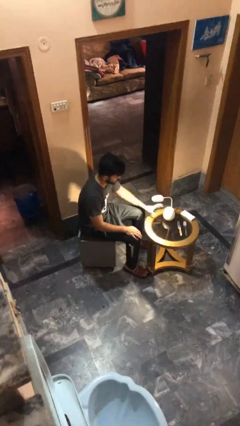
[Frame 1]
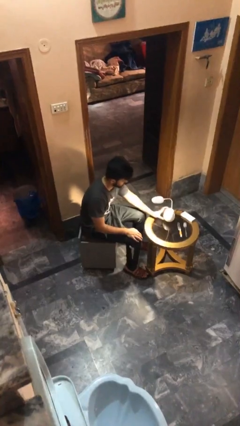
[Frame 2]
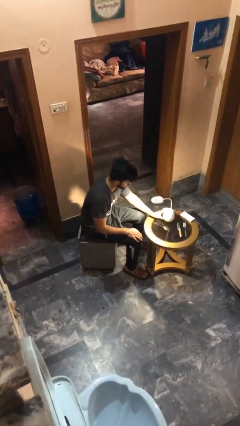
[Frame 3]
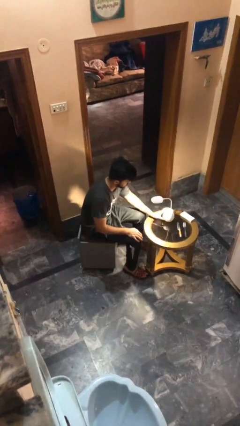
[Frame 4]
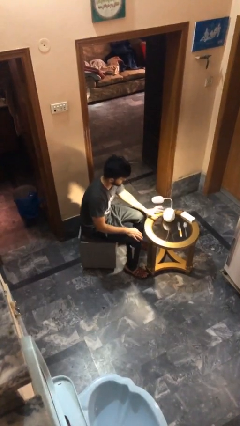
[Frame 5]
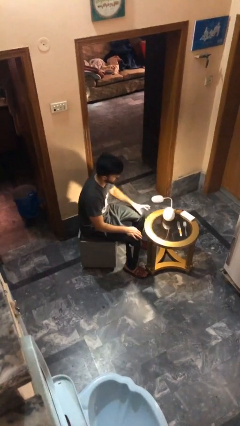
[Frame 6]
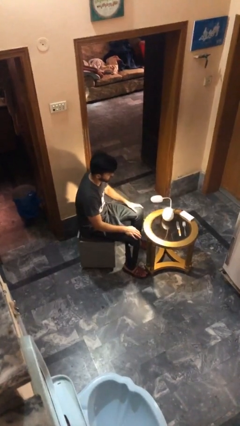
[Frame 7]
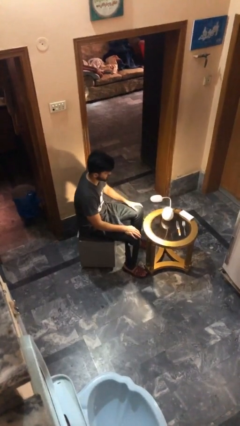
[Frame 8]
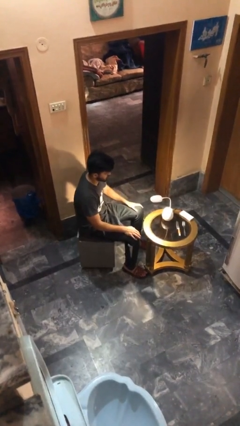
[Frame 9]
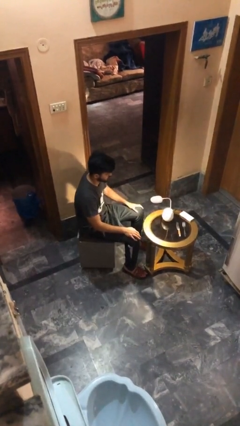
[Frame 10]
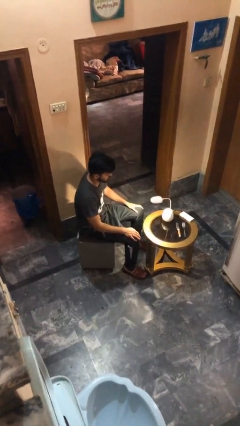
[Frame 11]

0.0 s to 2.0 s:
person turns off lamp

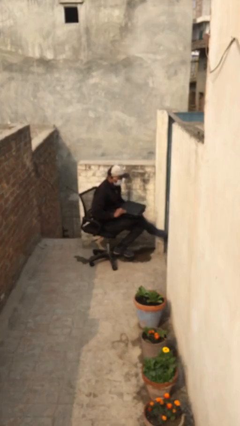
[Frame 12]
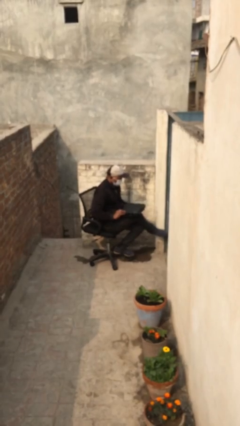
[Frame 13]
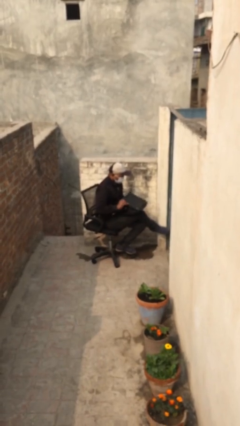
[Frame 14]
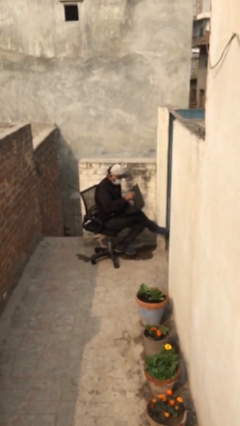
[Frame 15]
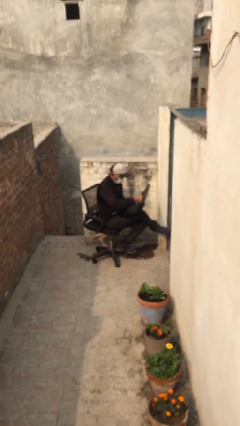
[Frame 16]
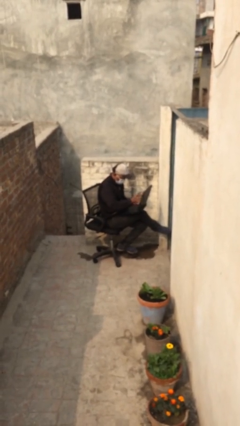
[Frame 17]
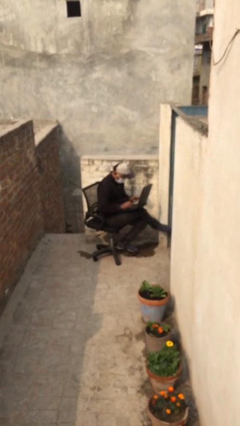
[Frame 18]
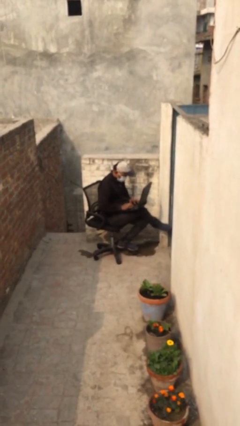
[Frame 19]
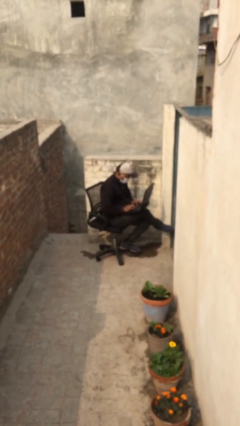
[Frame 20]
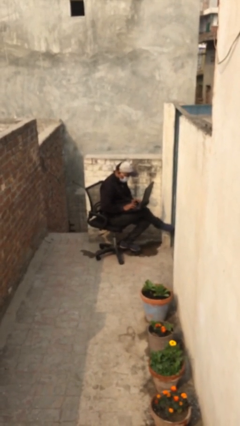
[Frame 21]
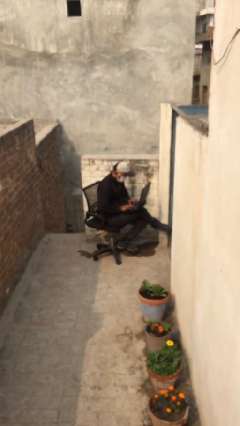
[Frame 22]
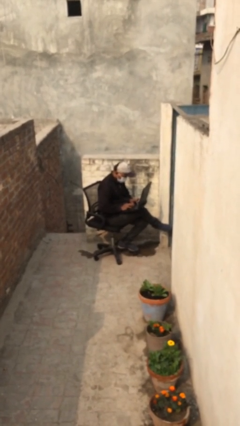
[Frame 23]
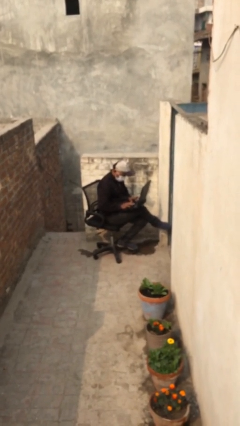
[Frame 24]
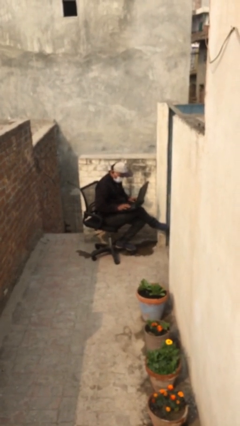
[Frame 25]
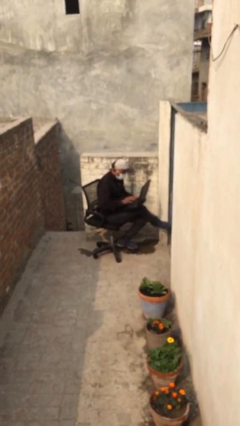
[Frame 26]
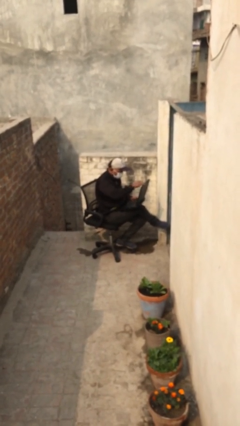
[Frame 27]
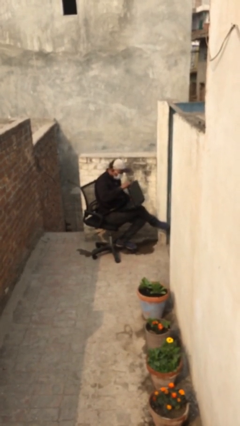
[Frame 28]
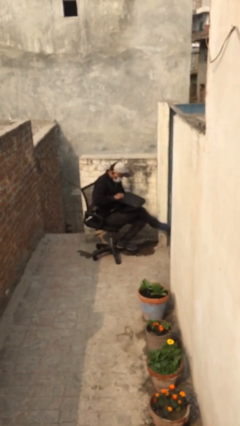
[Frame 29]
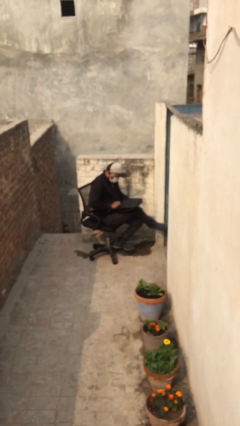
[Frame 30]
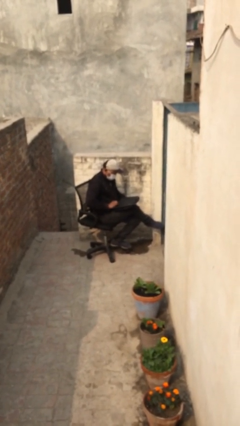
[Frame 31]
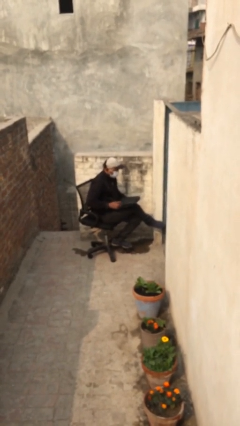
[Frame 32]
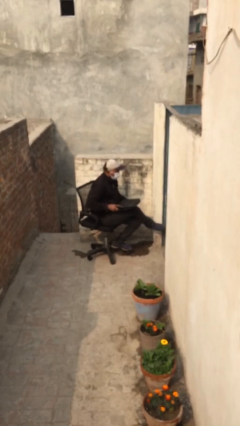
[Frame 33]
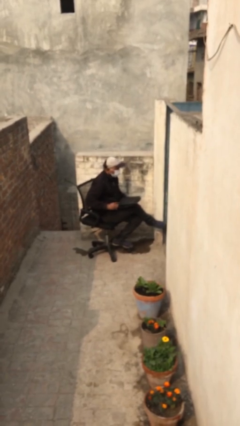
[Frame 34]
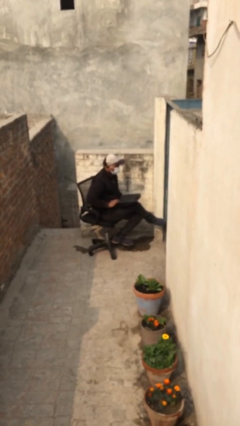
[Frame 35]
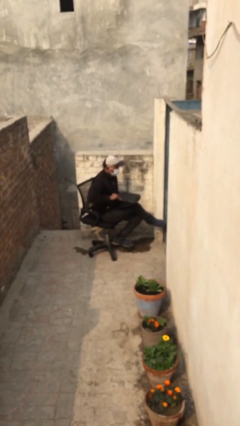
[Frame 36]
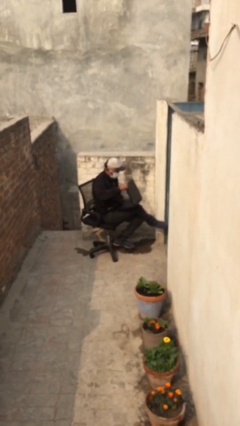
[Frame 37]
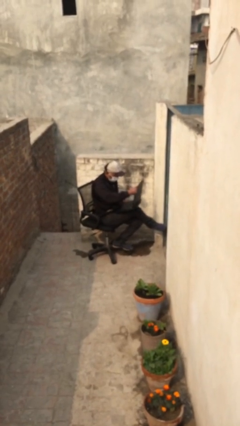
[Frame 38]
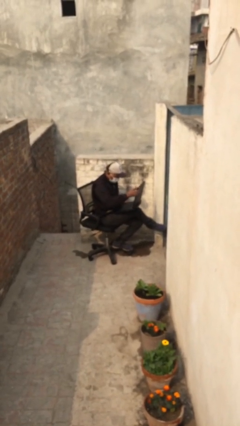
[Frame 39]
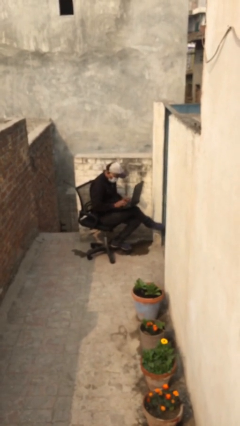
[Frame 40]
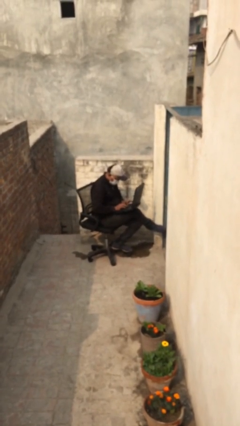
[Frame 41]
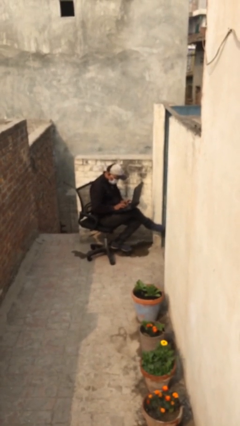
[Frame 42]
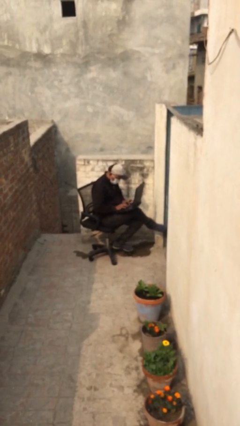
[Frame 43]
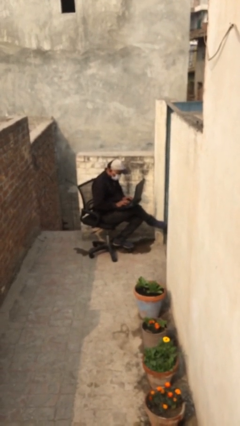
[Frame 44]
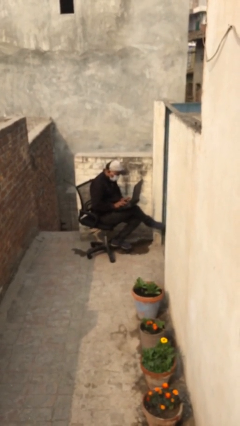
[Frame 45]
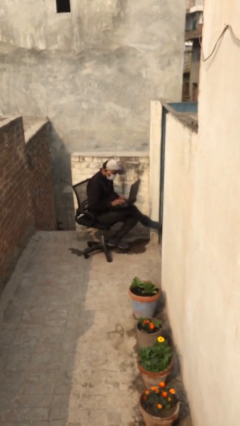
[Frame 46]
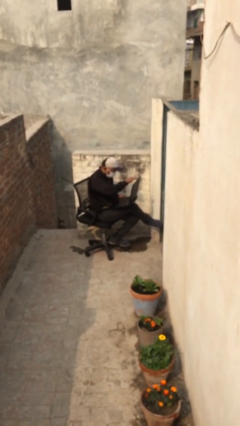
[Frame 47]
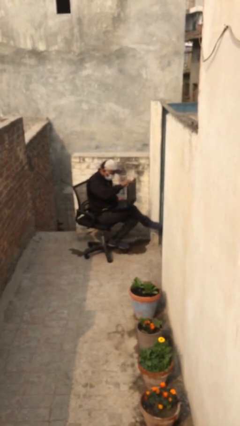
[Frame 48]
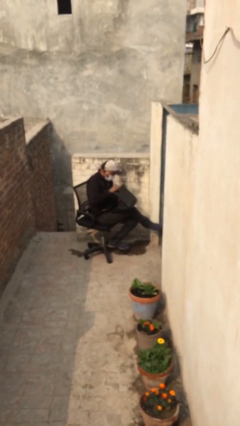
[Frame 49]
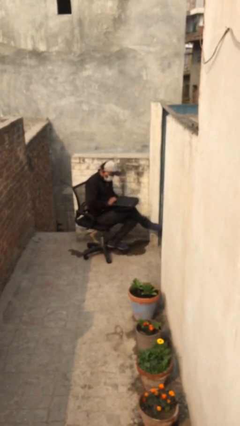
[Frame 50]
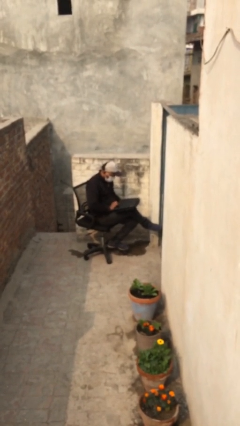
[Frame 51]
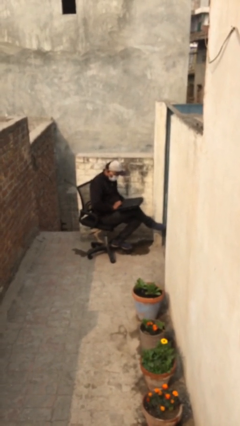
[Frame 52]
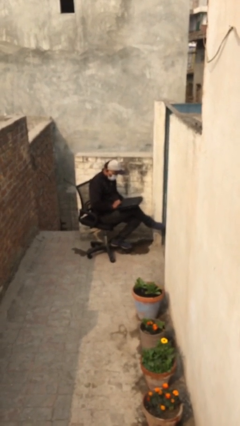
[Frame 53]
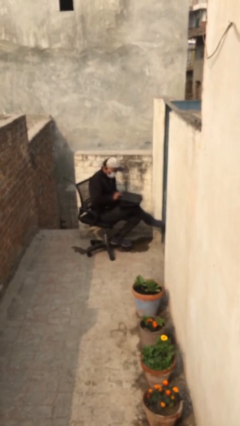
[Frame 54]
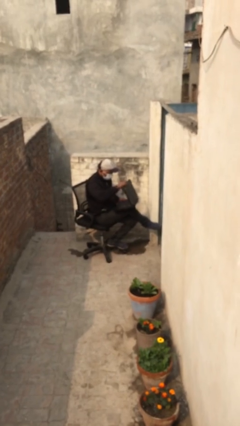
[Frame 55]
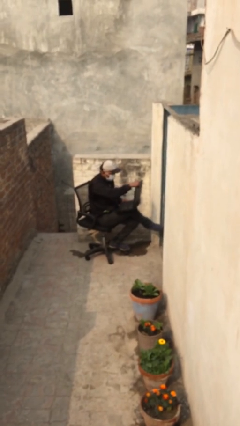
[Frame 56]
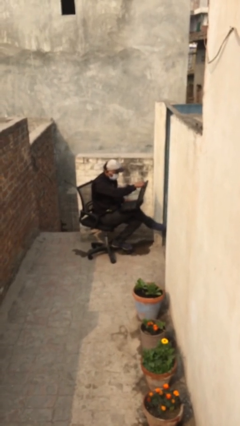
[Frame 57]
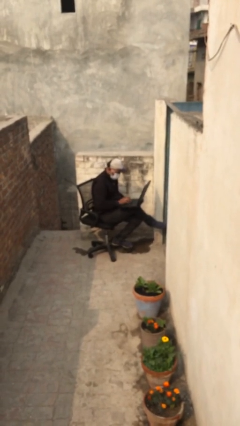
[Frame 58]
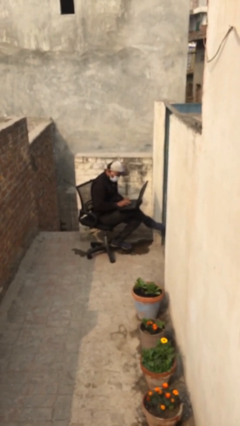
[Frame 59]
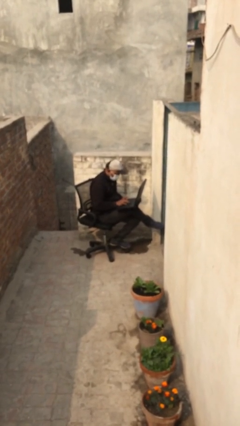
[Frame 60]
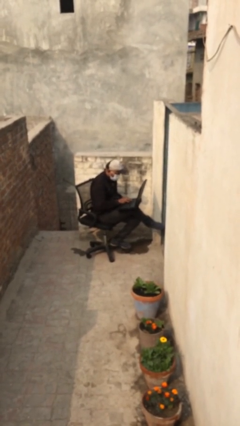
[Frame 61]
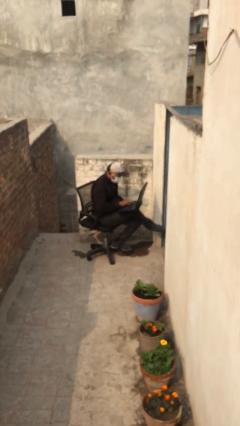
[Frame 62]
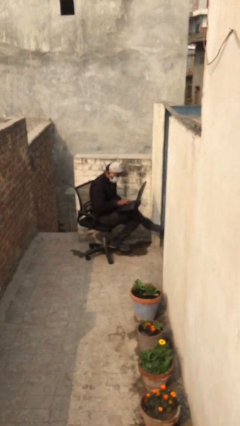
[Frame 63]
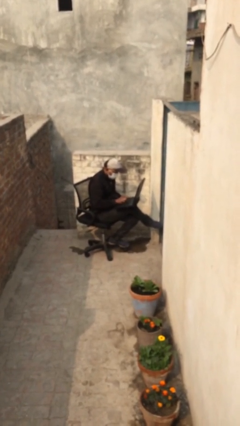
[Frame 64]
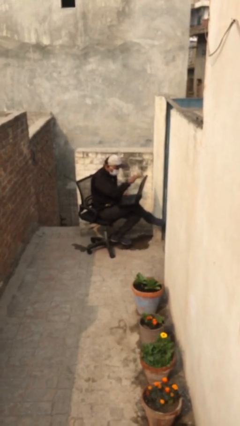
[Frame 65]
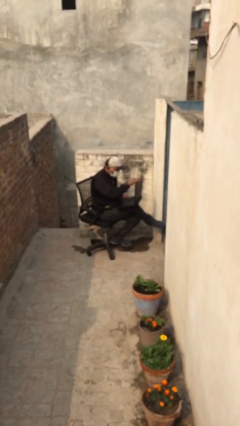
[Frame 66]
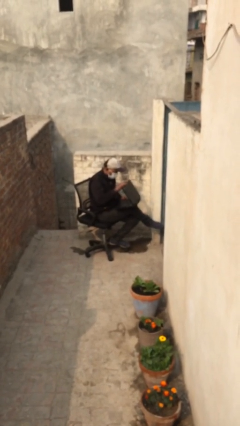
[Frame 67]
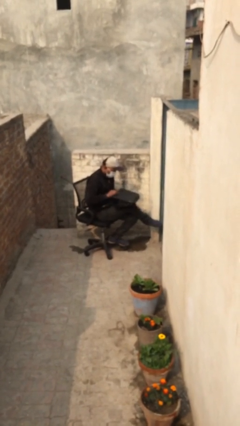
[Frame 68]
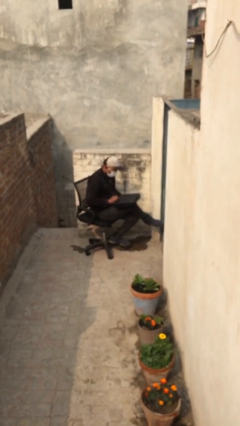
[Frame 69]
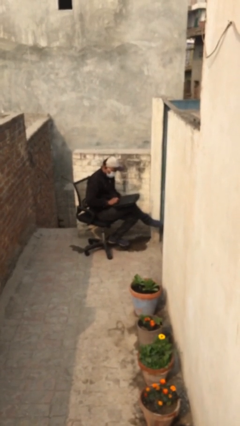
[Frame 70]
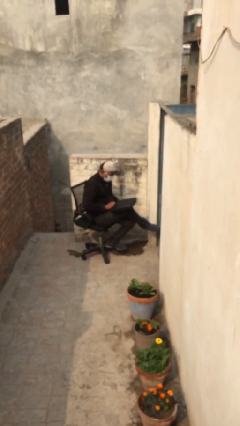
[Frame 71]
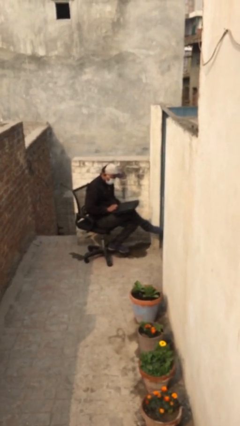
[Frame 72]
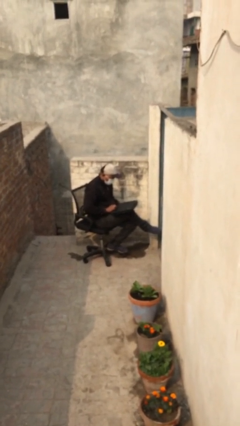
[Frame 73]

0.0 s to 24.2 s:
person interacts with laptop

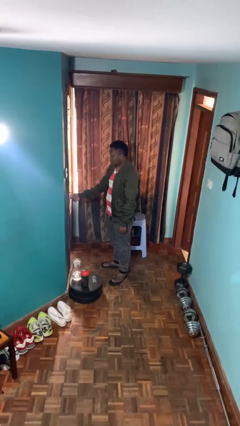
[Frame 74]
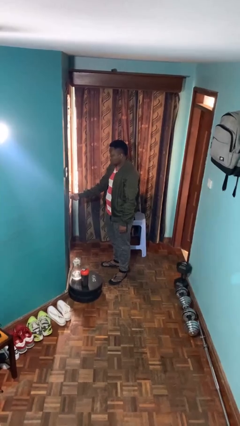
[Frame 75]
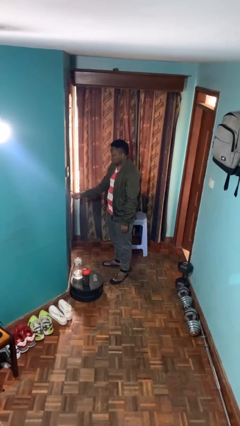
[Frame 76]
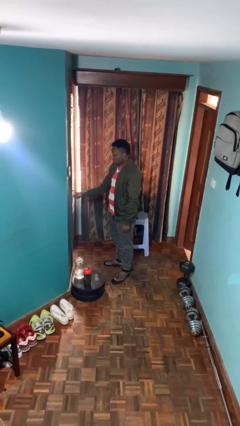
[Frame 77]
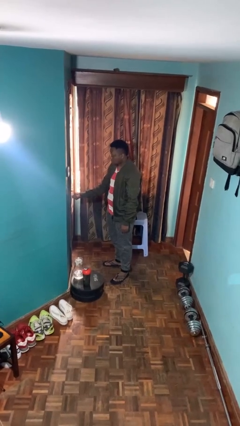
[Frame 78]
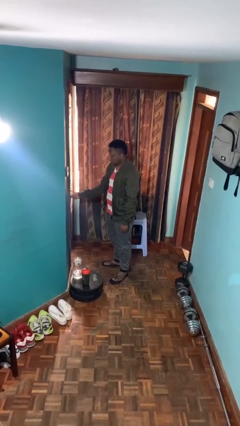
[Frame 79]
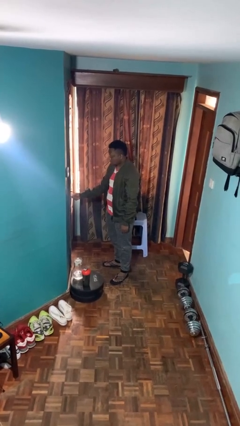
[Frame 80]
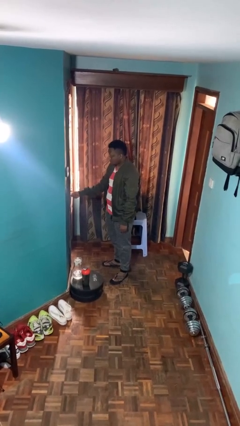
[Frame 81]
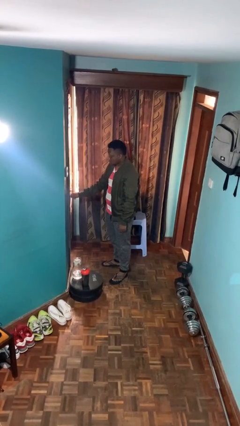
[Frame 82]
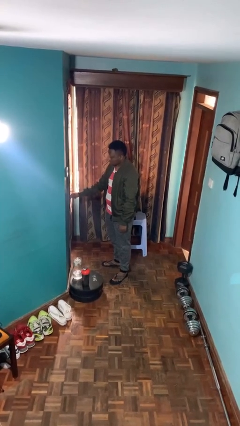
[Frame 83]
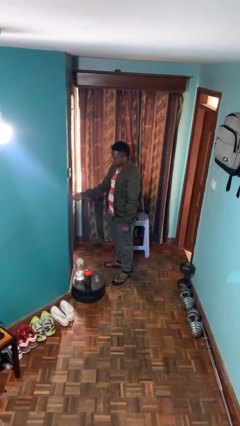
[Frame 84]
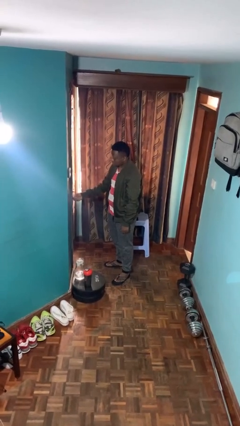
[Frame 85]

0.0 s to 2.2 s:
person unlocks door with keys

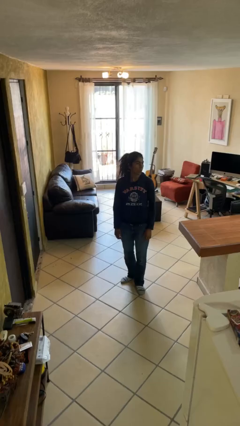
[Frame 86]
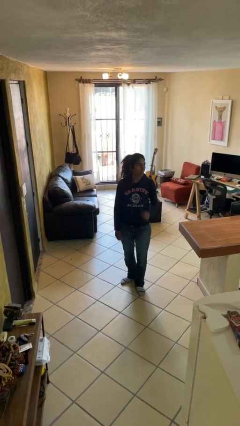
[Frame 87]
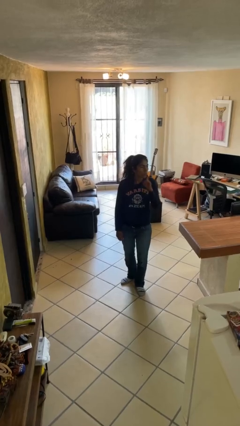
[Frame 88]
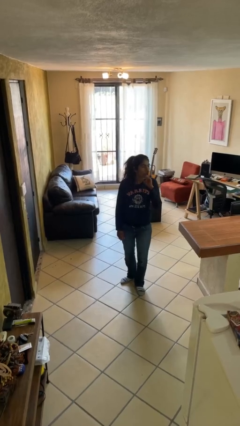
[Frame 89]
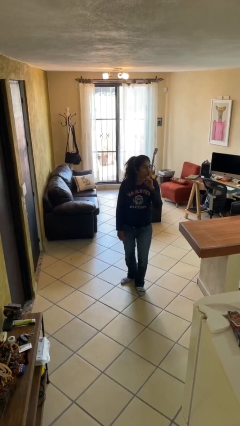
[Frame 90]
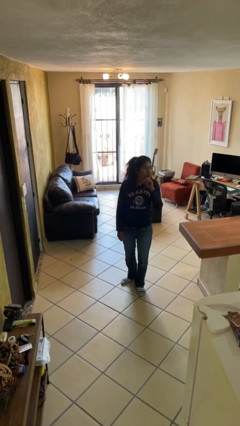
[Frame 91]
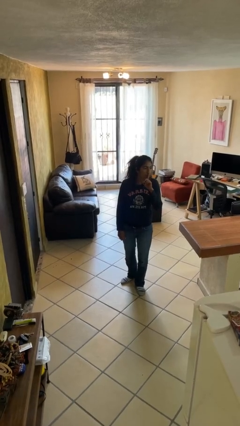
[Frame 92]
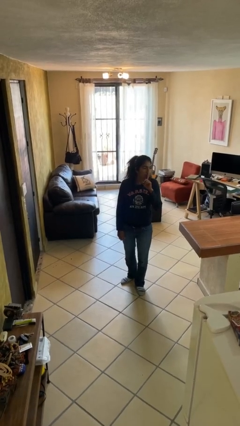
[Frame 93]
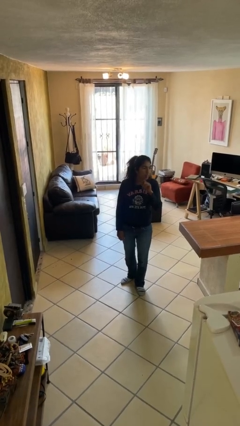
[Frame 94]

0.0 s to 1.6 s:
person gestures be quiet
